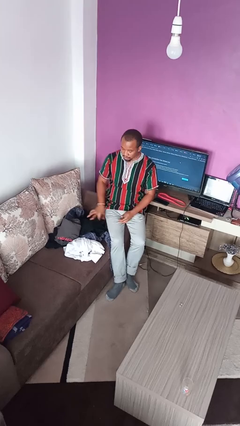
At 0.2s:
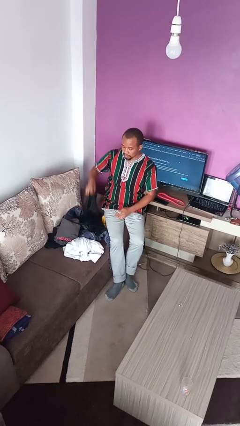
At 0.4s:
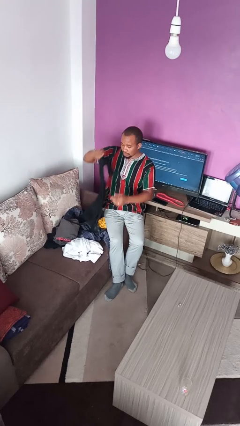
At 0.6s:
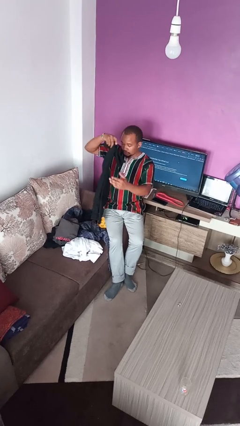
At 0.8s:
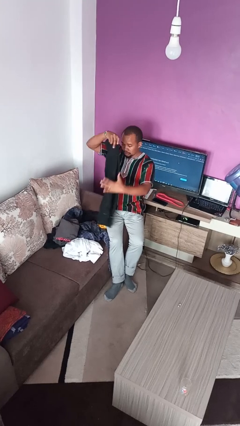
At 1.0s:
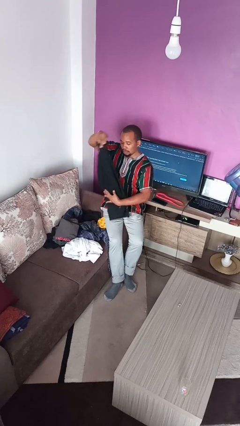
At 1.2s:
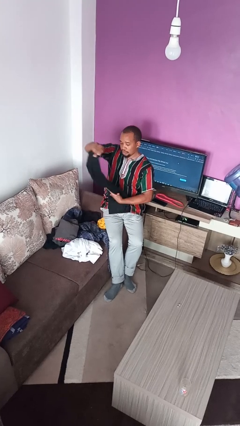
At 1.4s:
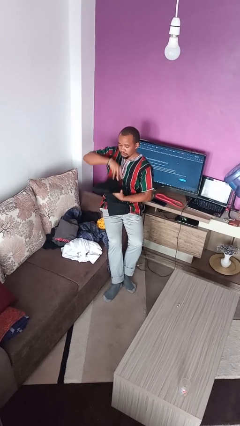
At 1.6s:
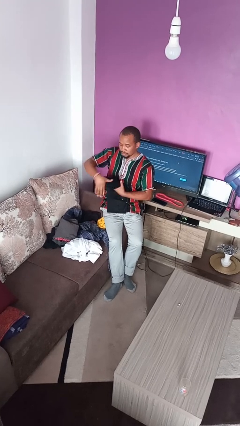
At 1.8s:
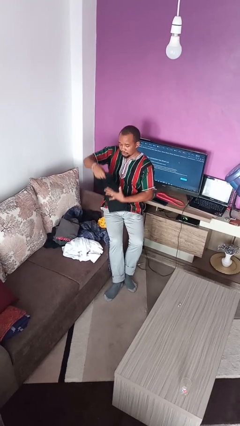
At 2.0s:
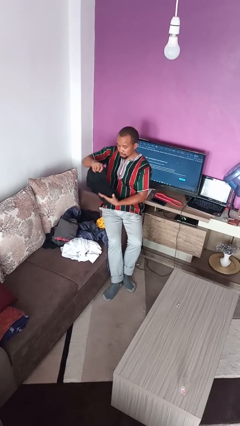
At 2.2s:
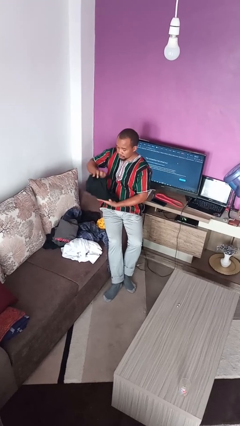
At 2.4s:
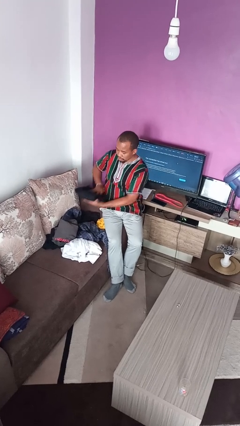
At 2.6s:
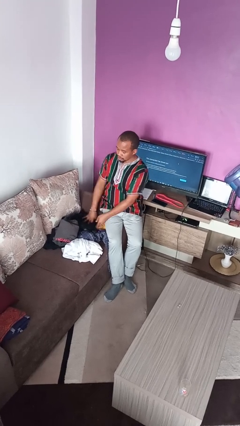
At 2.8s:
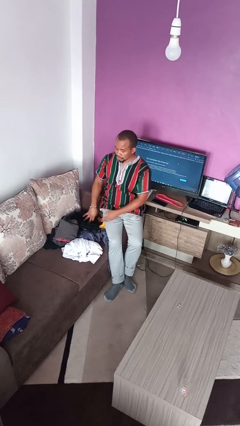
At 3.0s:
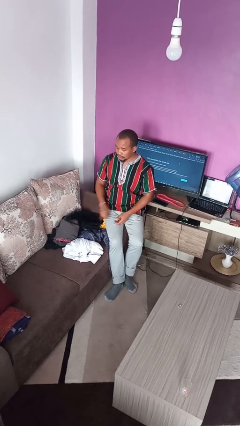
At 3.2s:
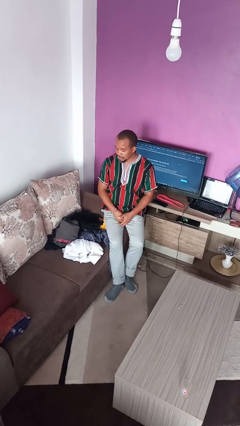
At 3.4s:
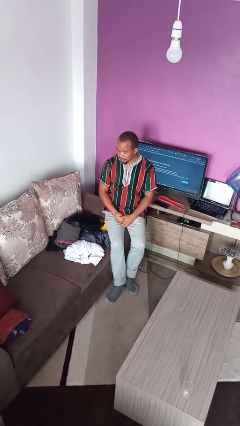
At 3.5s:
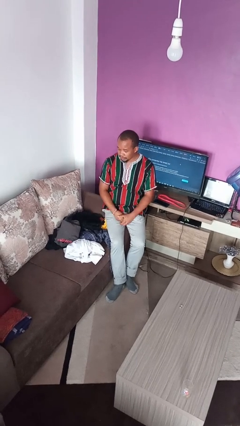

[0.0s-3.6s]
person folds pants

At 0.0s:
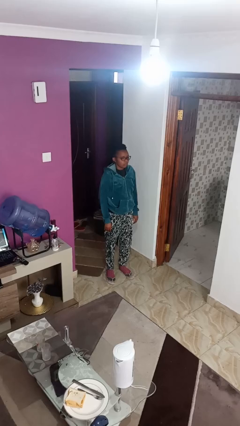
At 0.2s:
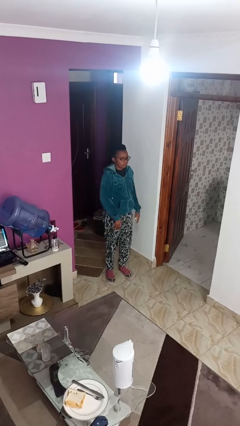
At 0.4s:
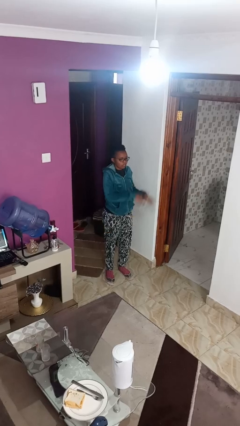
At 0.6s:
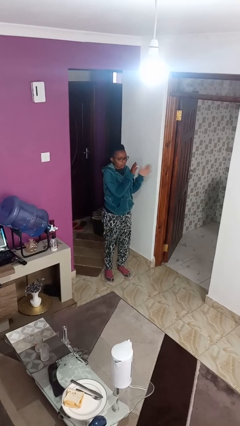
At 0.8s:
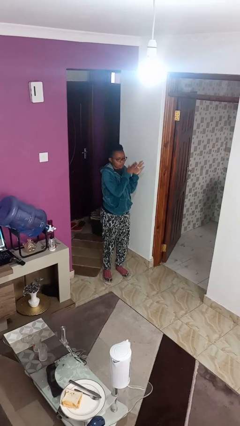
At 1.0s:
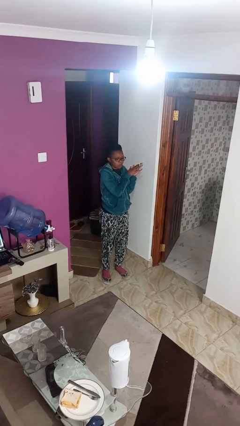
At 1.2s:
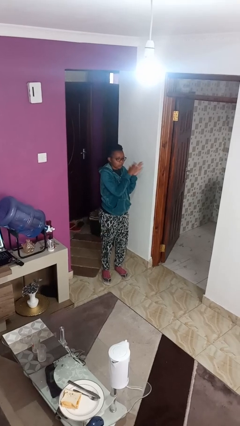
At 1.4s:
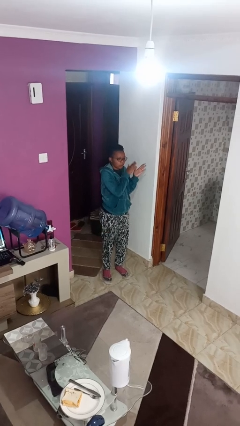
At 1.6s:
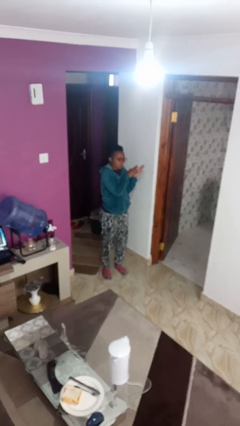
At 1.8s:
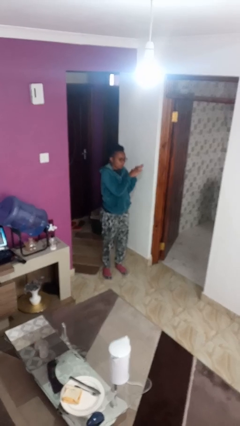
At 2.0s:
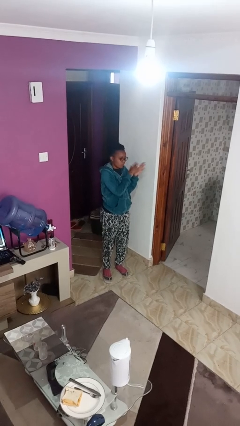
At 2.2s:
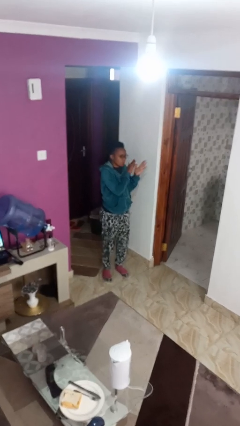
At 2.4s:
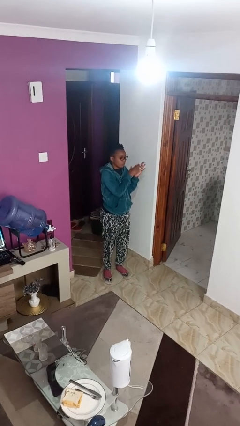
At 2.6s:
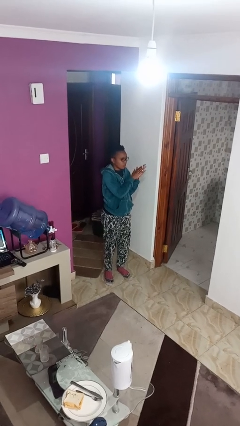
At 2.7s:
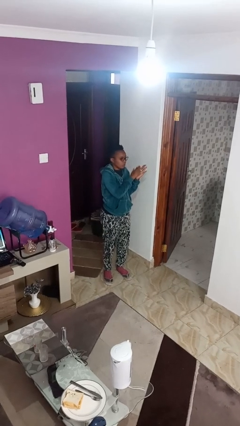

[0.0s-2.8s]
person claps hands

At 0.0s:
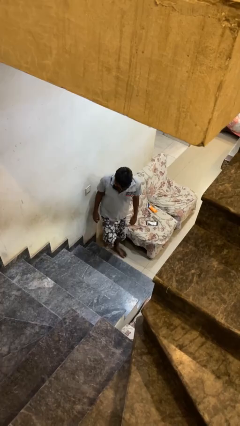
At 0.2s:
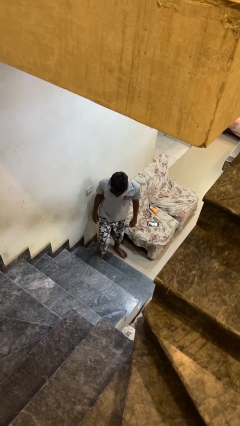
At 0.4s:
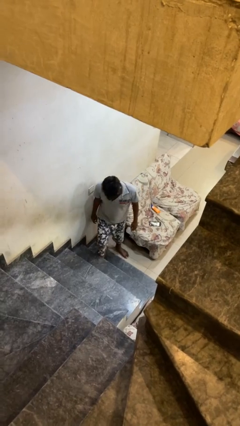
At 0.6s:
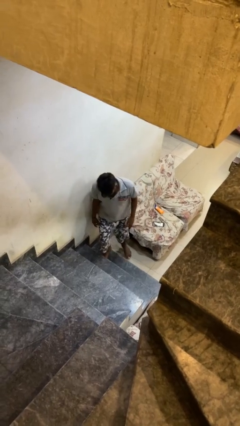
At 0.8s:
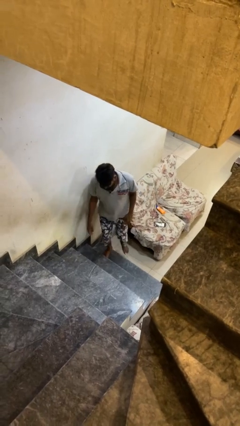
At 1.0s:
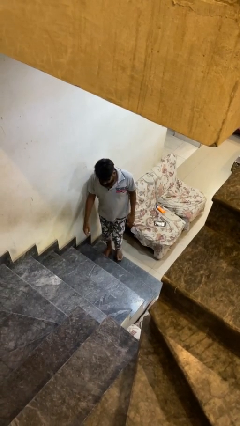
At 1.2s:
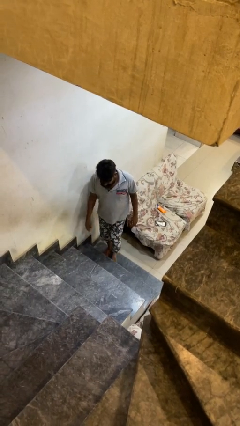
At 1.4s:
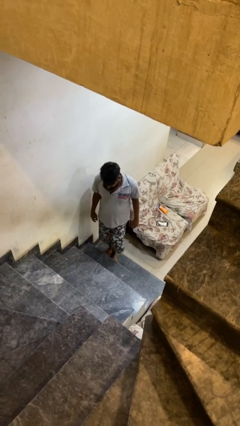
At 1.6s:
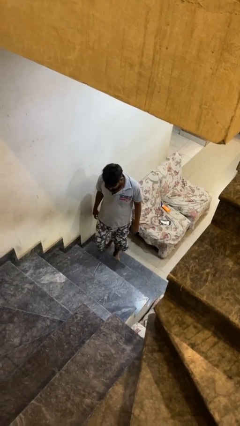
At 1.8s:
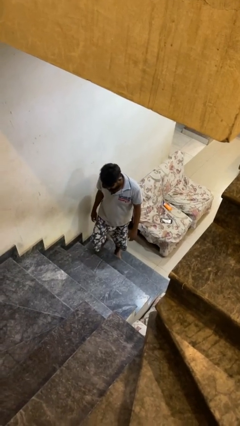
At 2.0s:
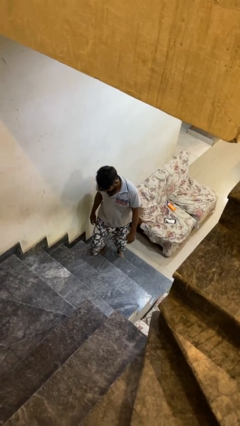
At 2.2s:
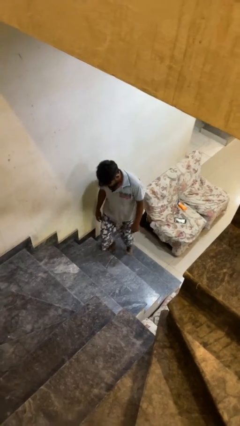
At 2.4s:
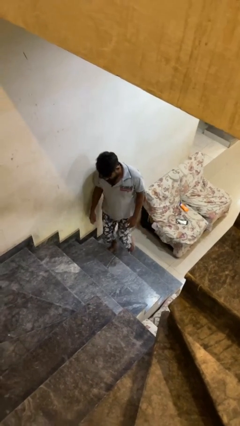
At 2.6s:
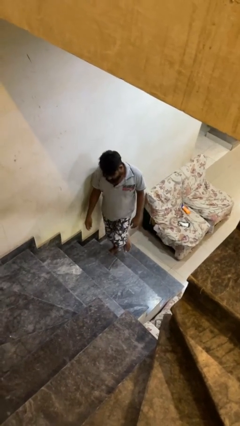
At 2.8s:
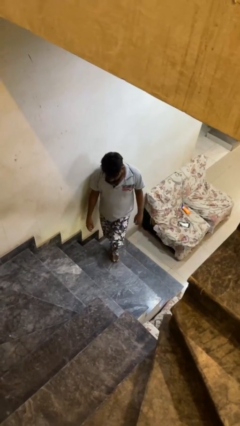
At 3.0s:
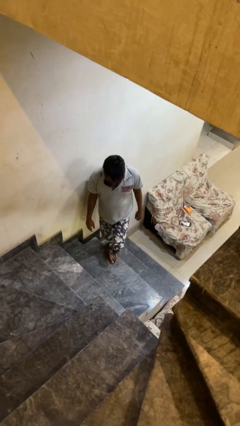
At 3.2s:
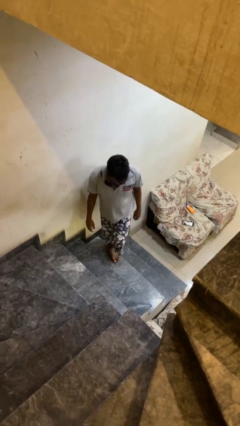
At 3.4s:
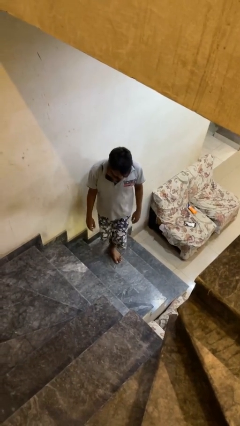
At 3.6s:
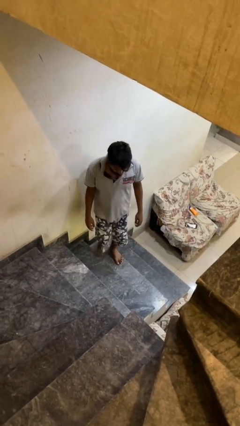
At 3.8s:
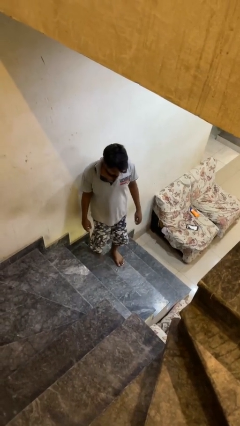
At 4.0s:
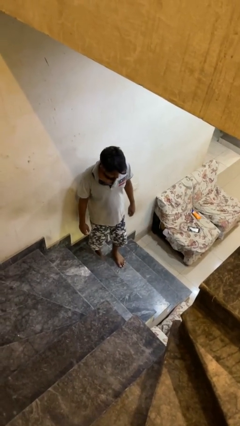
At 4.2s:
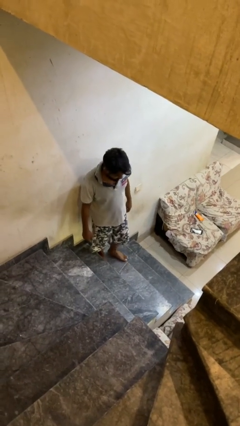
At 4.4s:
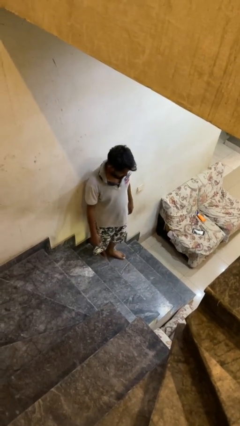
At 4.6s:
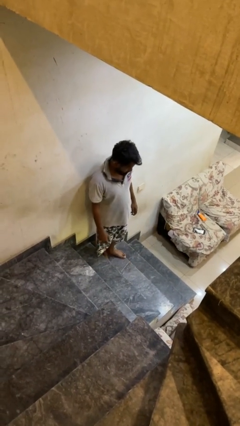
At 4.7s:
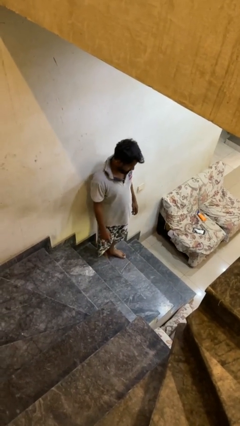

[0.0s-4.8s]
person climbs up stairs

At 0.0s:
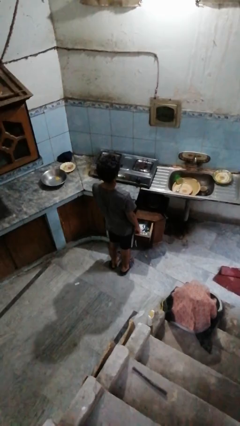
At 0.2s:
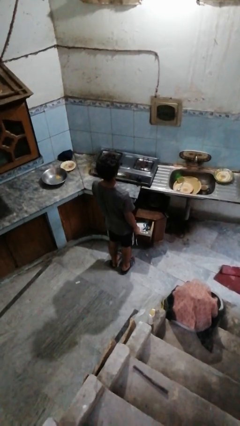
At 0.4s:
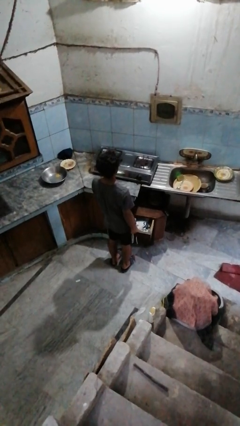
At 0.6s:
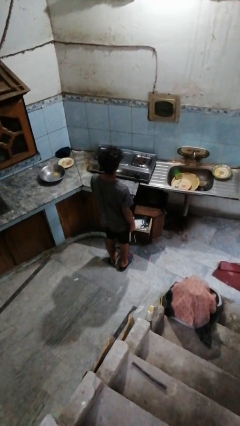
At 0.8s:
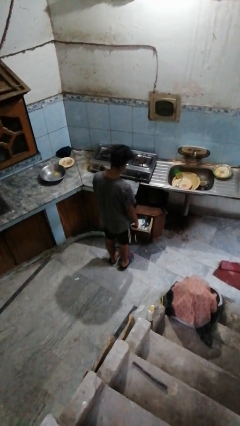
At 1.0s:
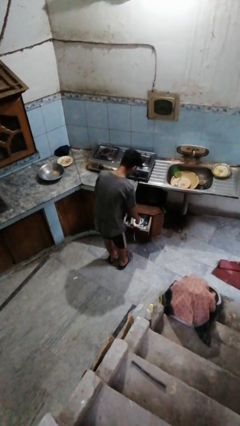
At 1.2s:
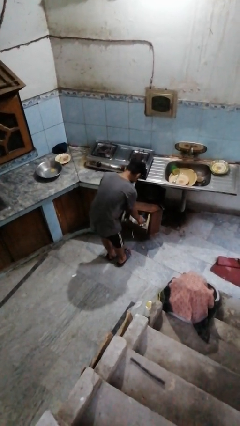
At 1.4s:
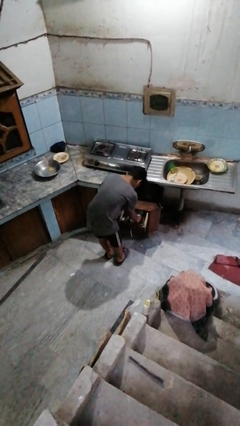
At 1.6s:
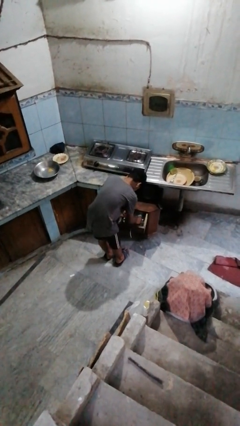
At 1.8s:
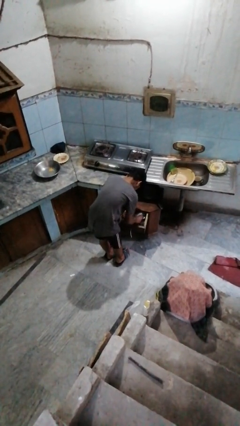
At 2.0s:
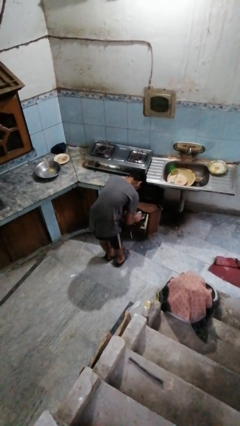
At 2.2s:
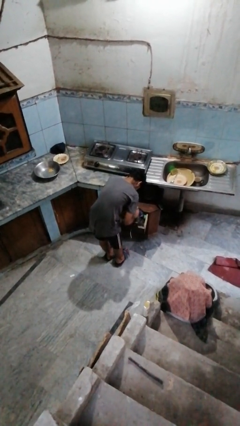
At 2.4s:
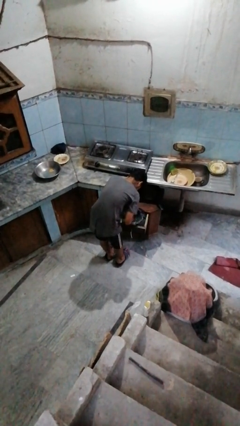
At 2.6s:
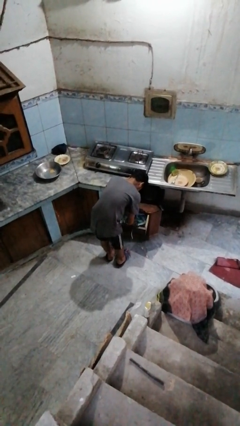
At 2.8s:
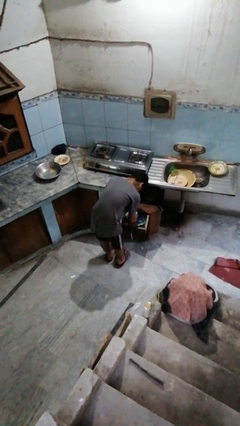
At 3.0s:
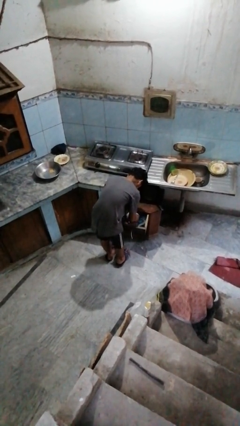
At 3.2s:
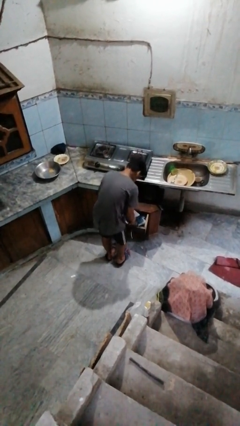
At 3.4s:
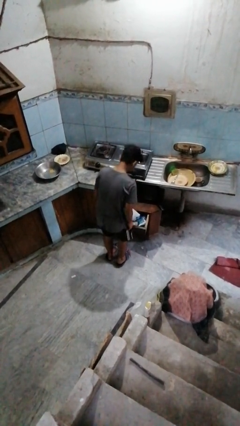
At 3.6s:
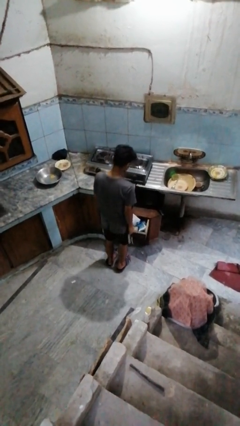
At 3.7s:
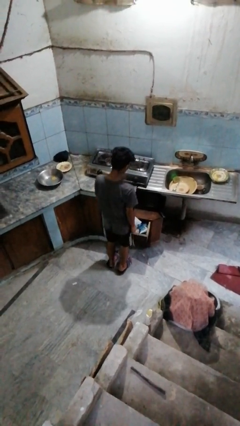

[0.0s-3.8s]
person searches in kitchen drawer

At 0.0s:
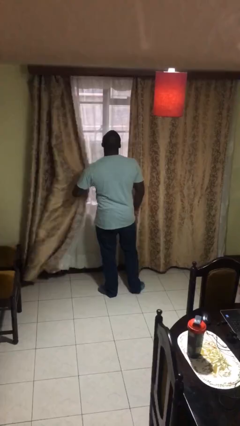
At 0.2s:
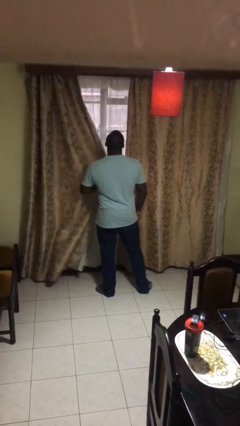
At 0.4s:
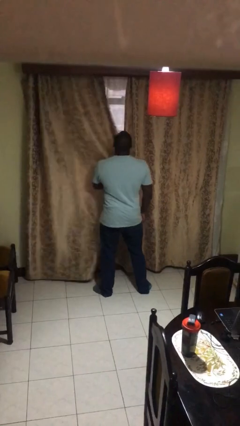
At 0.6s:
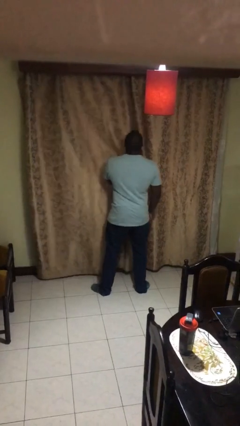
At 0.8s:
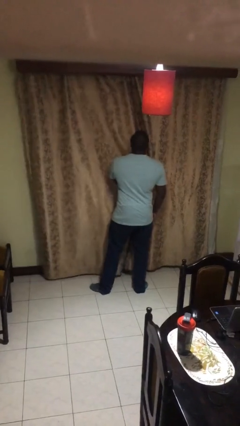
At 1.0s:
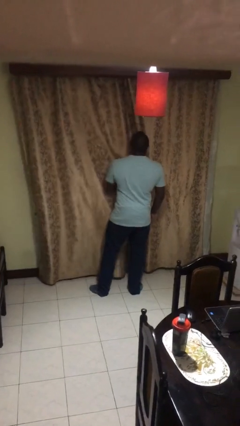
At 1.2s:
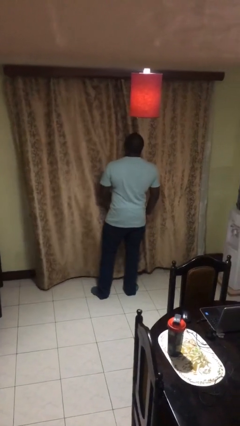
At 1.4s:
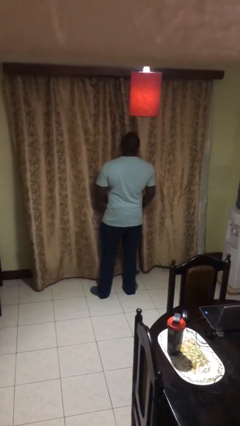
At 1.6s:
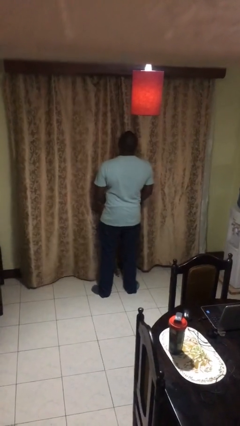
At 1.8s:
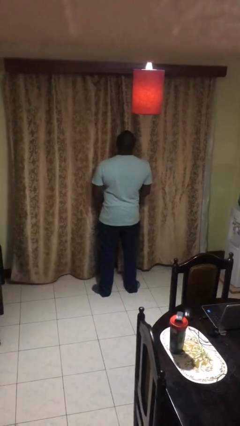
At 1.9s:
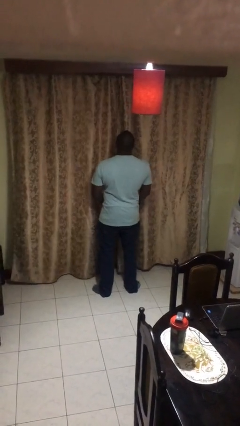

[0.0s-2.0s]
person closes curtains

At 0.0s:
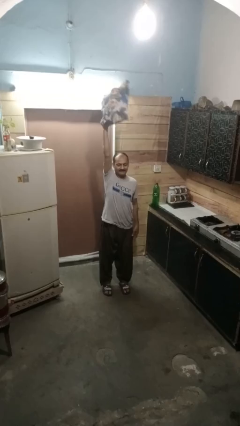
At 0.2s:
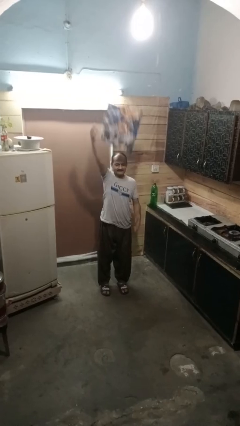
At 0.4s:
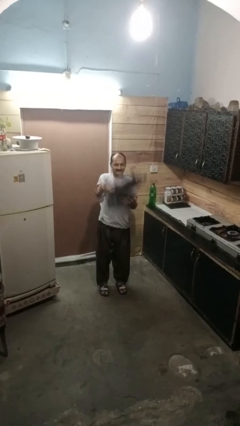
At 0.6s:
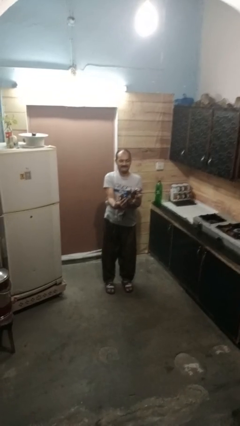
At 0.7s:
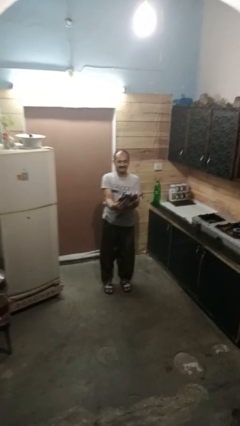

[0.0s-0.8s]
person drops object
